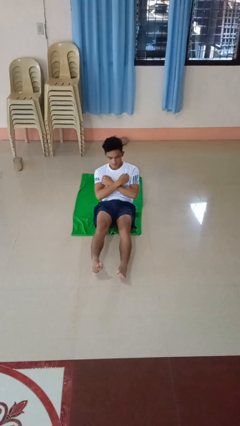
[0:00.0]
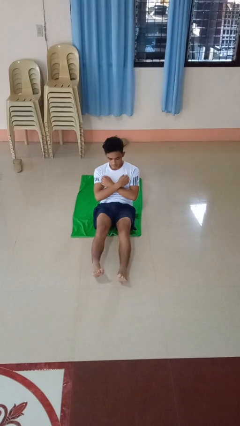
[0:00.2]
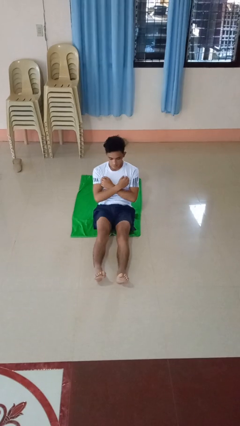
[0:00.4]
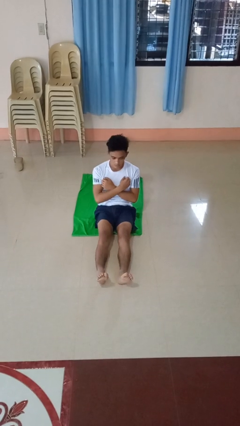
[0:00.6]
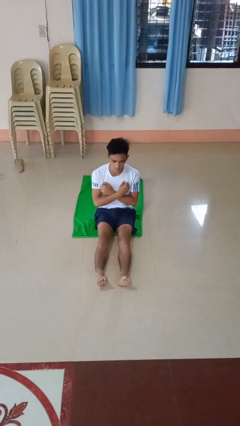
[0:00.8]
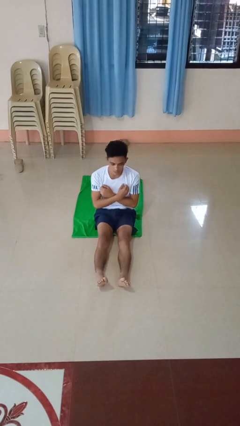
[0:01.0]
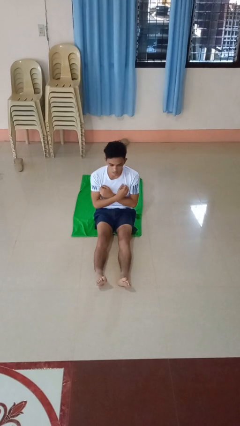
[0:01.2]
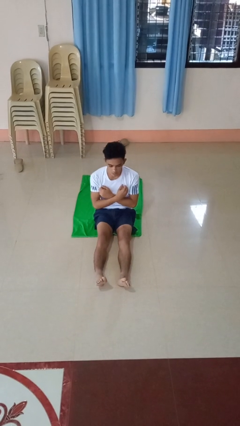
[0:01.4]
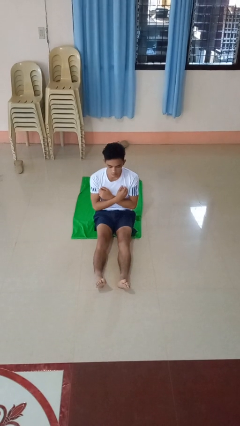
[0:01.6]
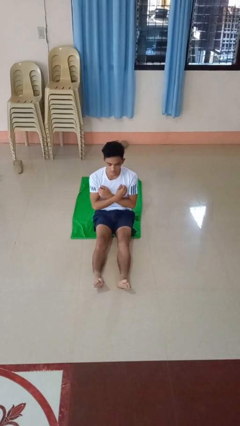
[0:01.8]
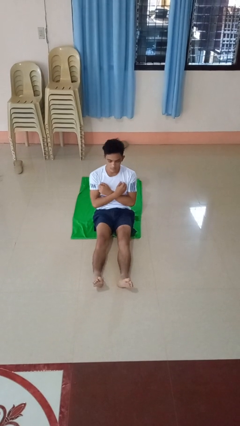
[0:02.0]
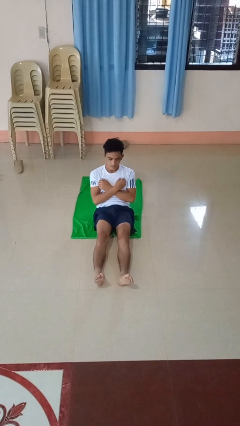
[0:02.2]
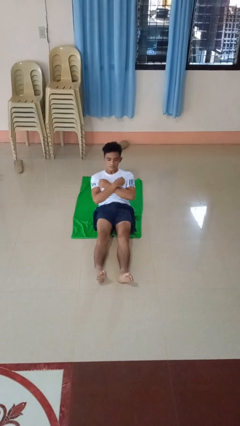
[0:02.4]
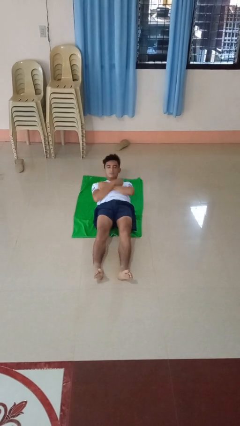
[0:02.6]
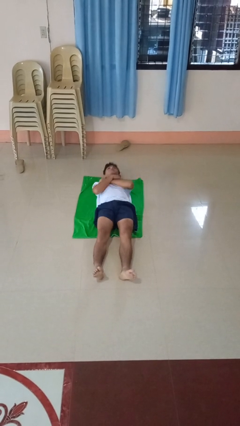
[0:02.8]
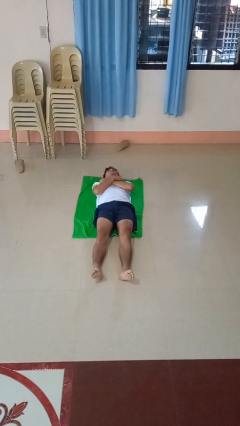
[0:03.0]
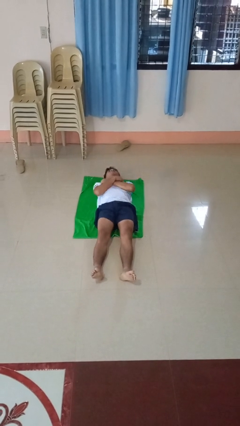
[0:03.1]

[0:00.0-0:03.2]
person exercises with situp

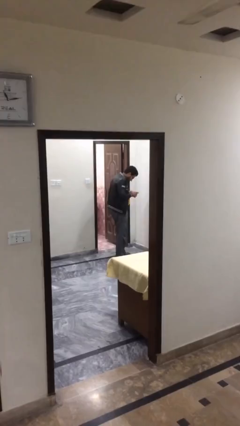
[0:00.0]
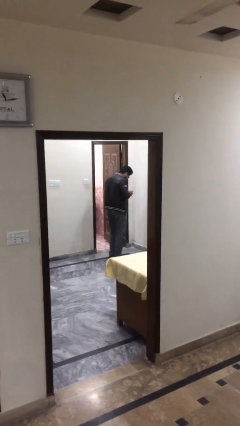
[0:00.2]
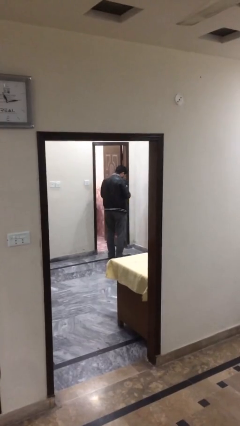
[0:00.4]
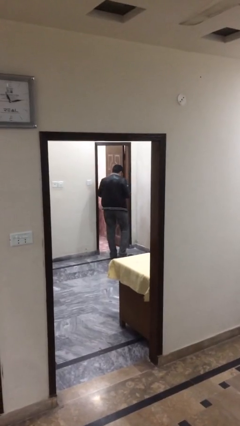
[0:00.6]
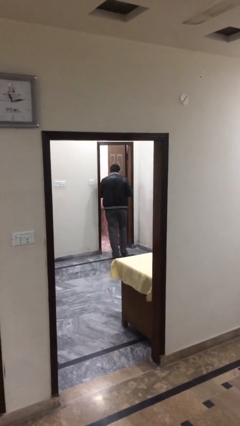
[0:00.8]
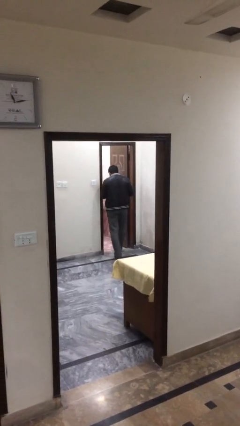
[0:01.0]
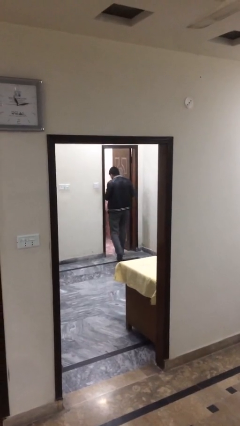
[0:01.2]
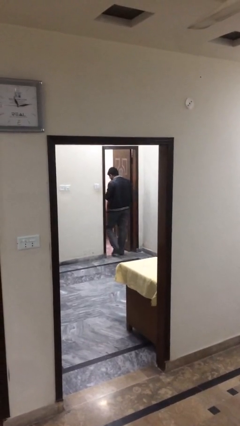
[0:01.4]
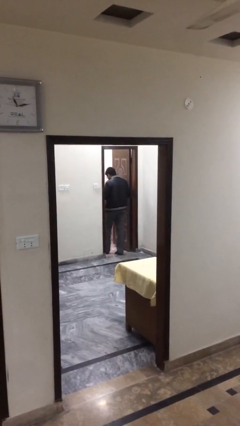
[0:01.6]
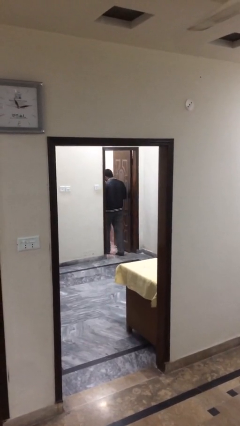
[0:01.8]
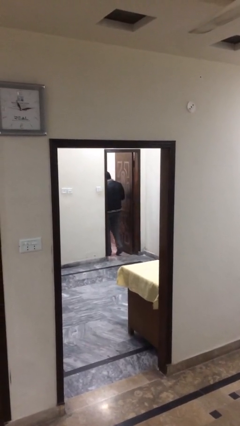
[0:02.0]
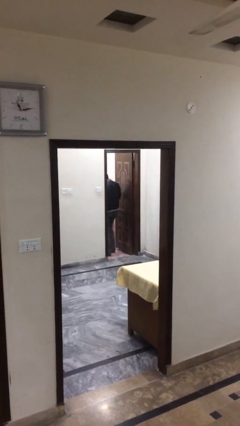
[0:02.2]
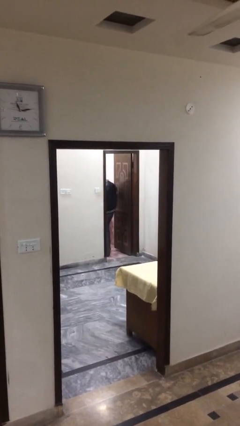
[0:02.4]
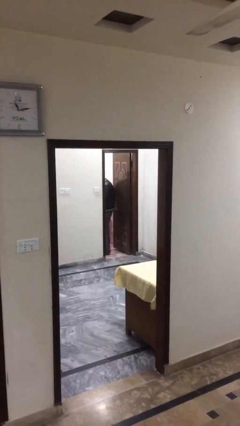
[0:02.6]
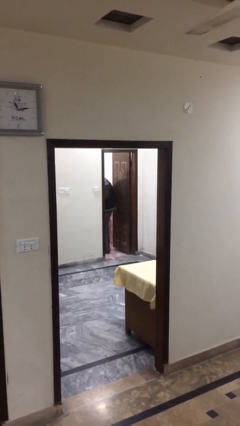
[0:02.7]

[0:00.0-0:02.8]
person enters scene through structure

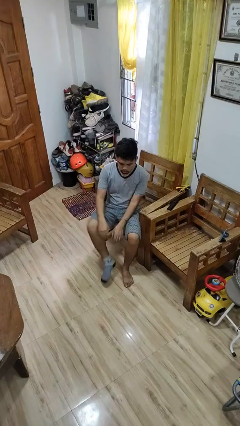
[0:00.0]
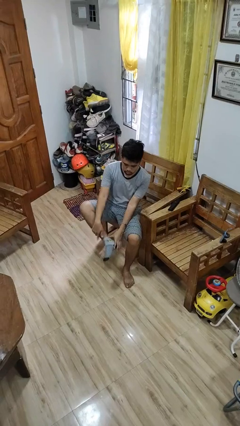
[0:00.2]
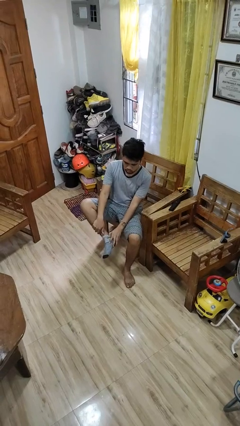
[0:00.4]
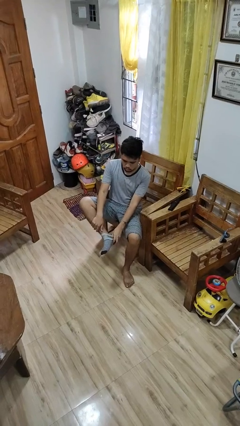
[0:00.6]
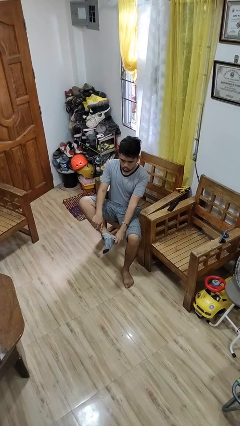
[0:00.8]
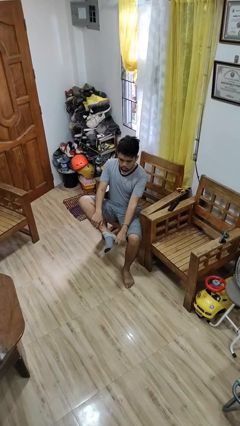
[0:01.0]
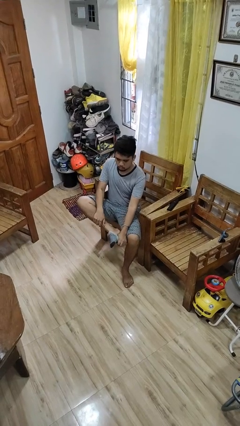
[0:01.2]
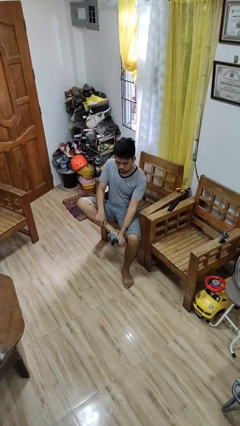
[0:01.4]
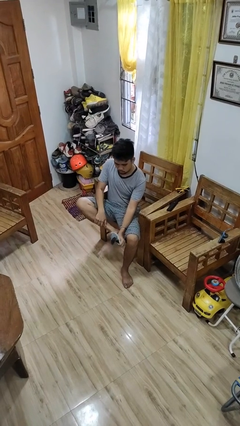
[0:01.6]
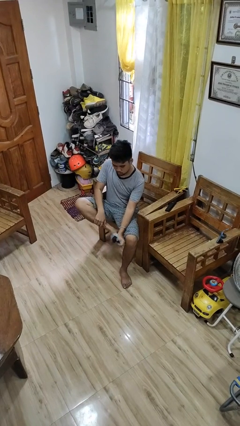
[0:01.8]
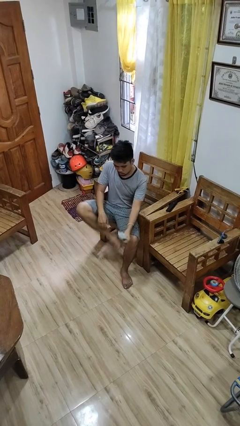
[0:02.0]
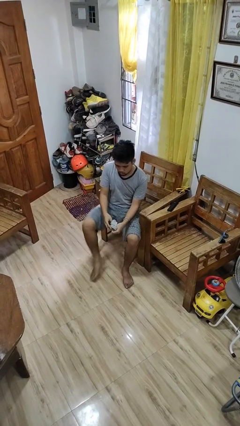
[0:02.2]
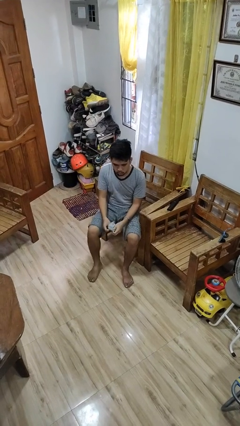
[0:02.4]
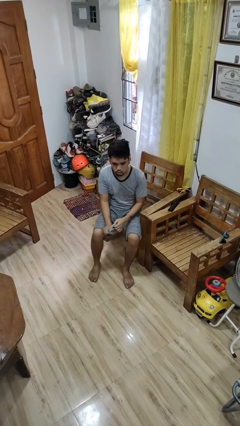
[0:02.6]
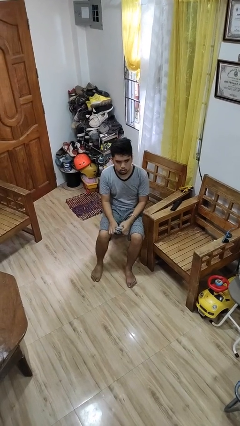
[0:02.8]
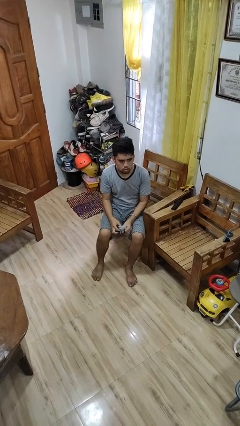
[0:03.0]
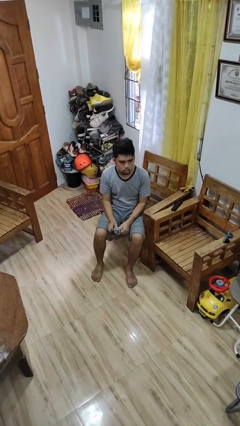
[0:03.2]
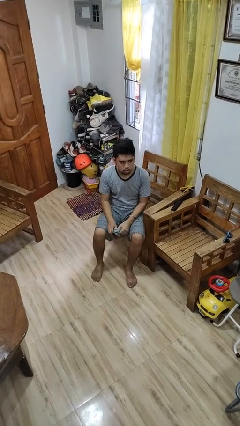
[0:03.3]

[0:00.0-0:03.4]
person takes off socks

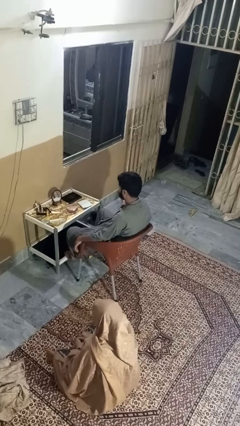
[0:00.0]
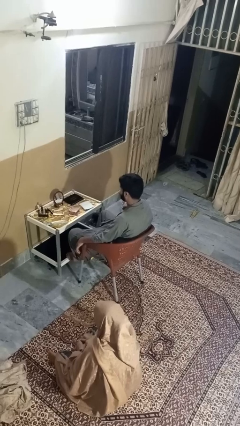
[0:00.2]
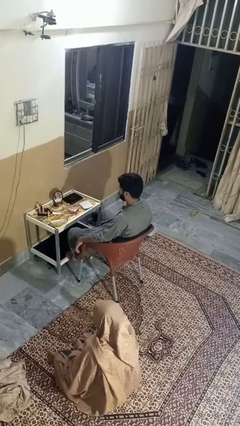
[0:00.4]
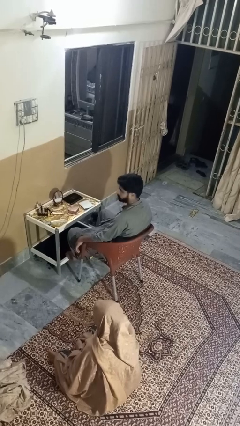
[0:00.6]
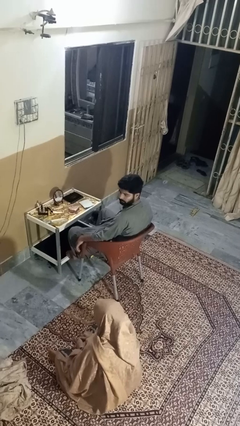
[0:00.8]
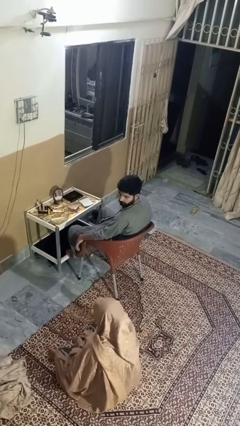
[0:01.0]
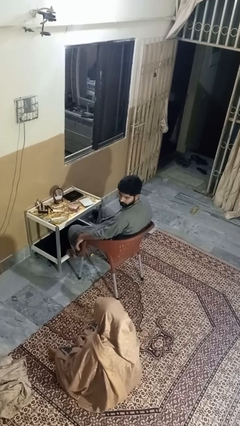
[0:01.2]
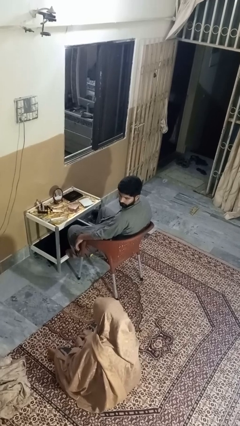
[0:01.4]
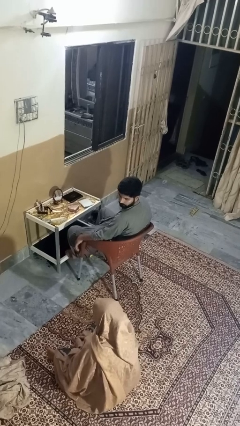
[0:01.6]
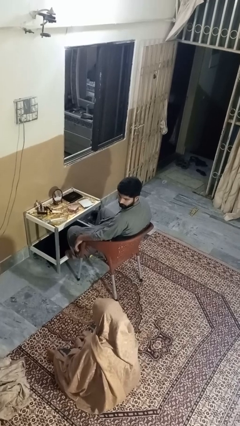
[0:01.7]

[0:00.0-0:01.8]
person looks over shoulder

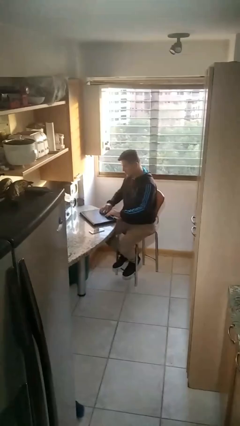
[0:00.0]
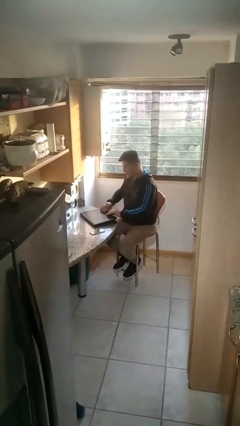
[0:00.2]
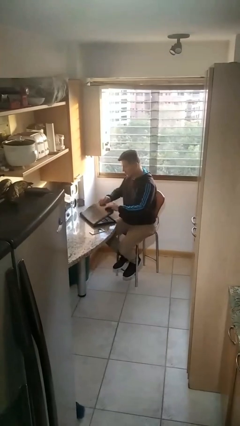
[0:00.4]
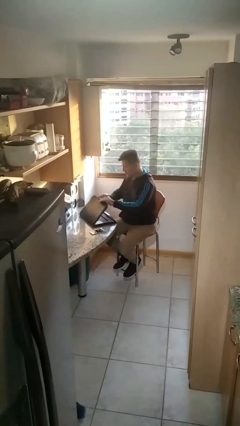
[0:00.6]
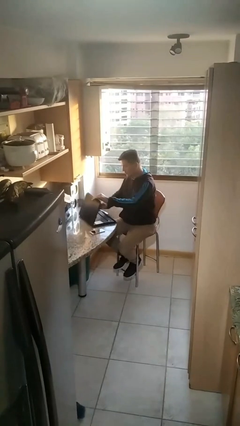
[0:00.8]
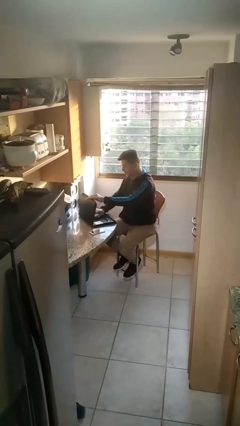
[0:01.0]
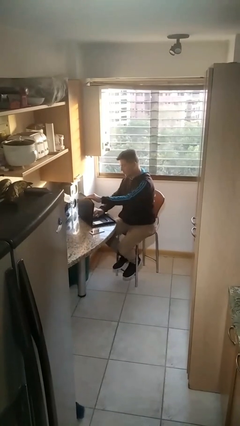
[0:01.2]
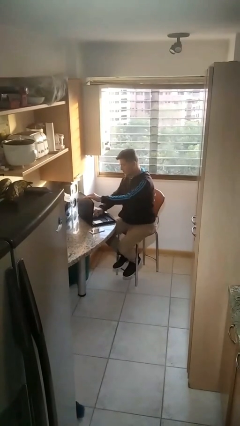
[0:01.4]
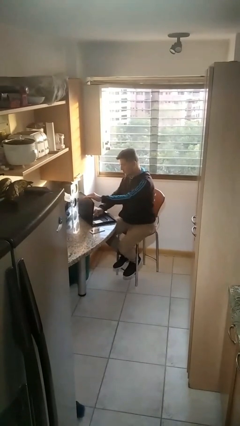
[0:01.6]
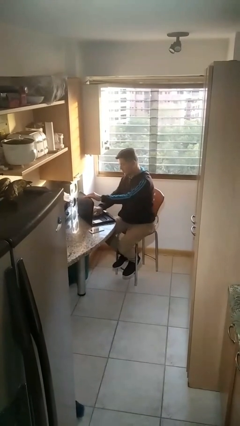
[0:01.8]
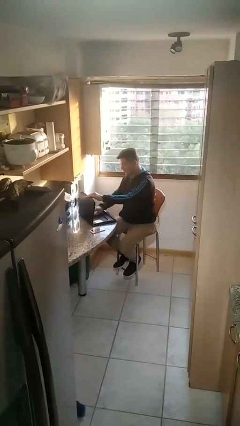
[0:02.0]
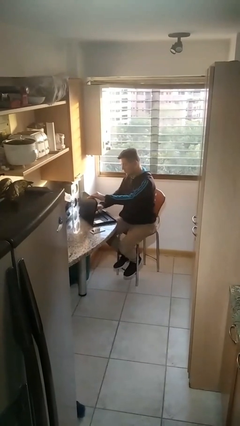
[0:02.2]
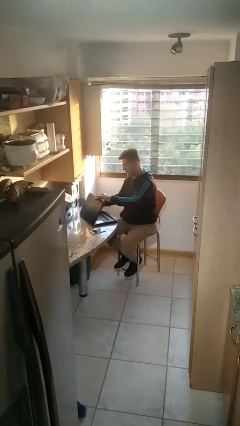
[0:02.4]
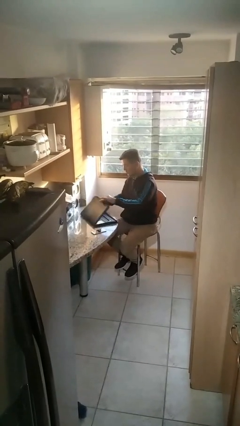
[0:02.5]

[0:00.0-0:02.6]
person interacts with laptop

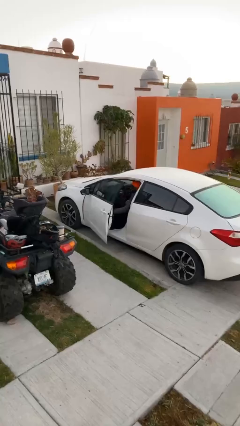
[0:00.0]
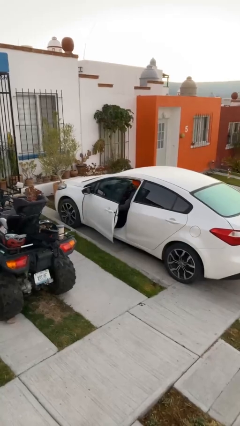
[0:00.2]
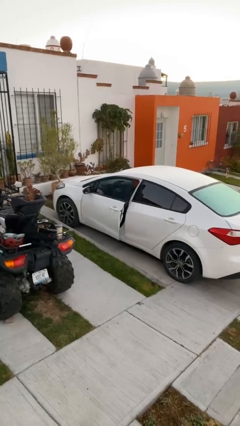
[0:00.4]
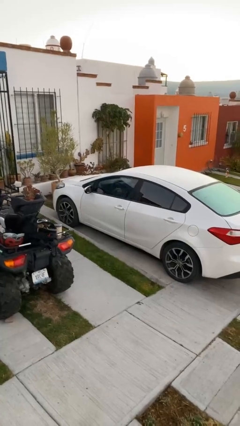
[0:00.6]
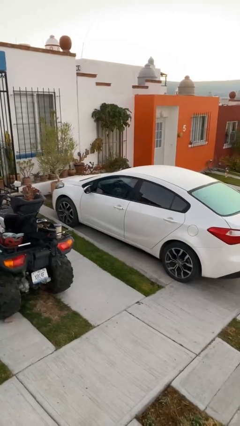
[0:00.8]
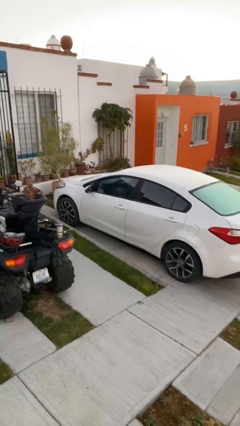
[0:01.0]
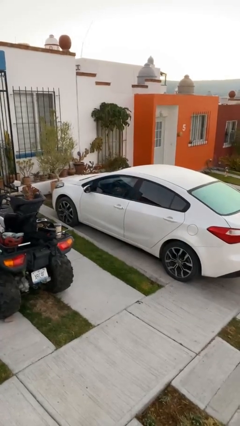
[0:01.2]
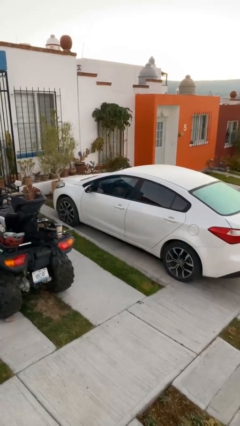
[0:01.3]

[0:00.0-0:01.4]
person closes car door

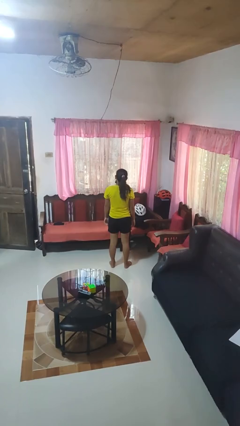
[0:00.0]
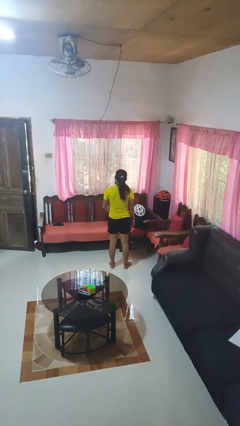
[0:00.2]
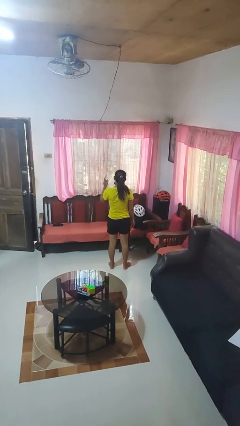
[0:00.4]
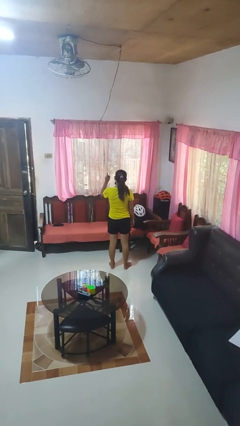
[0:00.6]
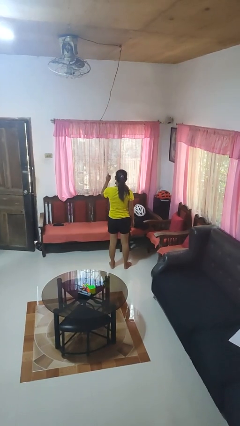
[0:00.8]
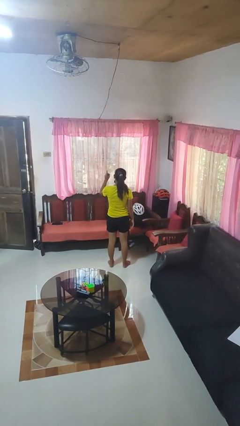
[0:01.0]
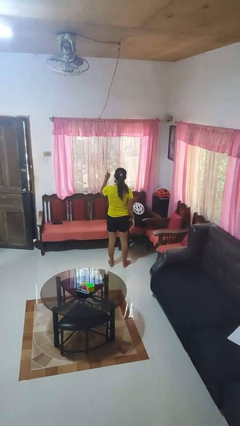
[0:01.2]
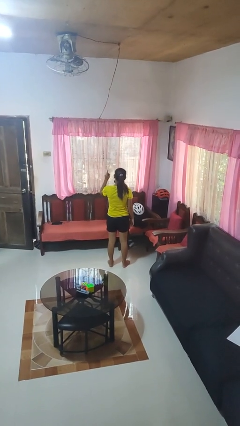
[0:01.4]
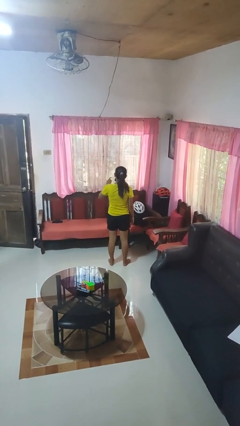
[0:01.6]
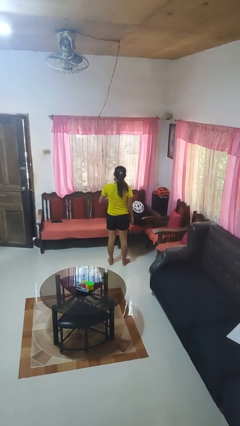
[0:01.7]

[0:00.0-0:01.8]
person gestures number one

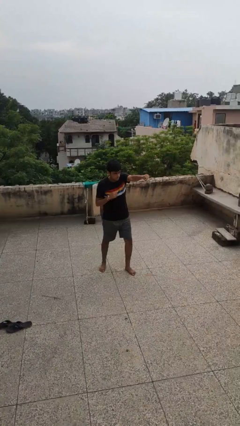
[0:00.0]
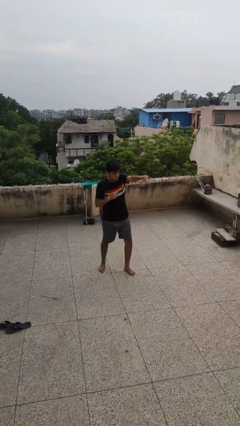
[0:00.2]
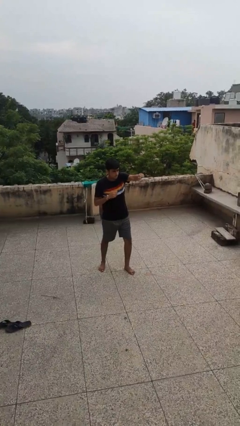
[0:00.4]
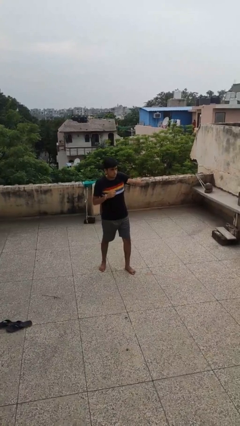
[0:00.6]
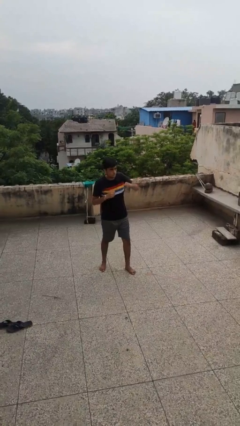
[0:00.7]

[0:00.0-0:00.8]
person punches
